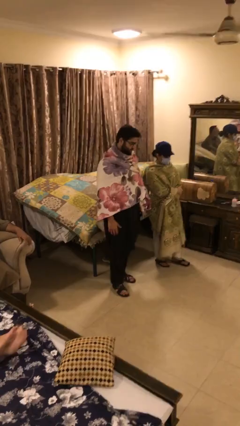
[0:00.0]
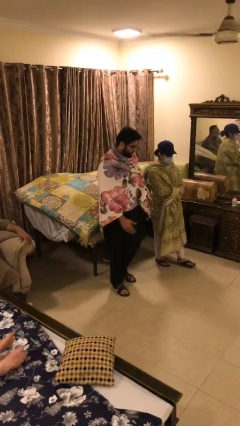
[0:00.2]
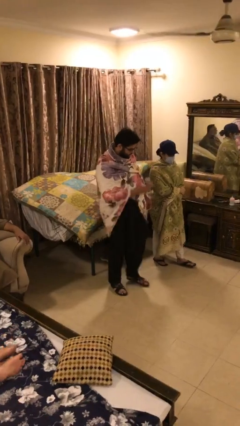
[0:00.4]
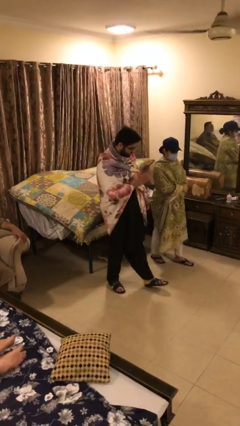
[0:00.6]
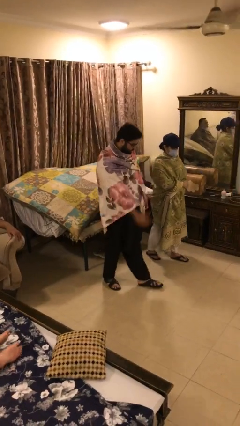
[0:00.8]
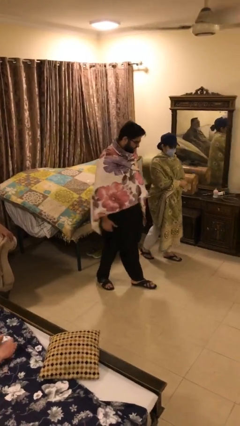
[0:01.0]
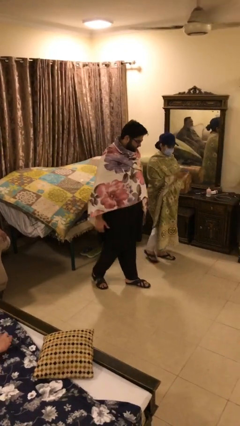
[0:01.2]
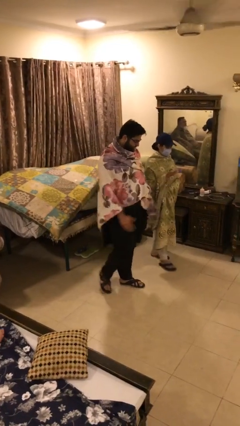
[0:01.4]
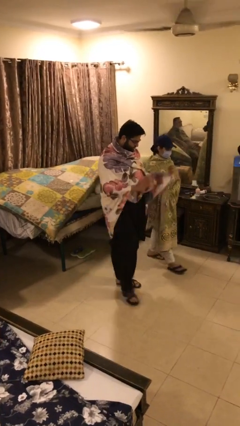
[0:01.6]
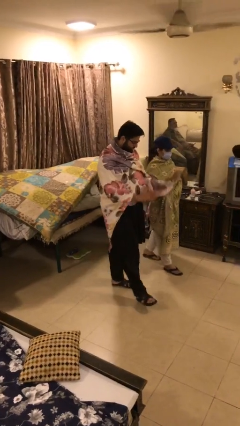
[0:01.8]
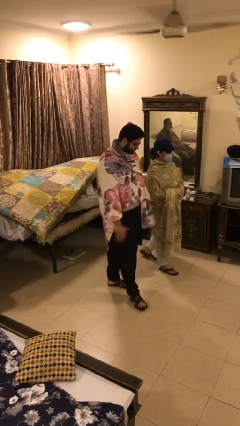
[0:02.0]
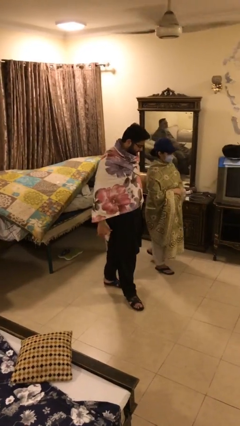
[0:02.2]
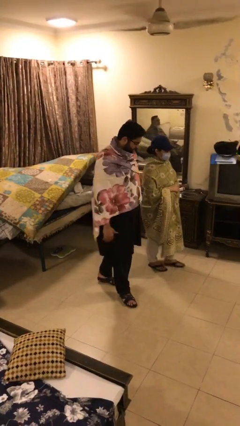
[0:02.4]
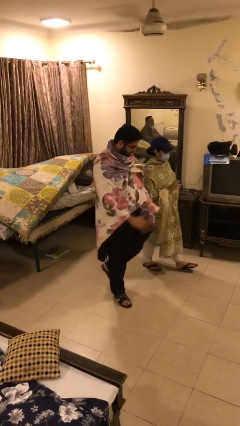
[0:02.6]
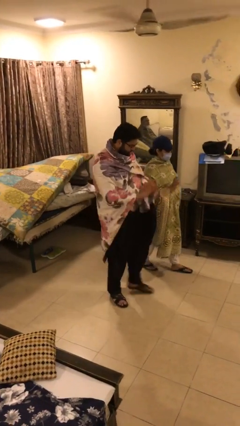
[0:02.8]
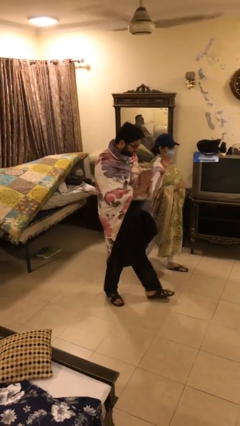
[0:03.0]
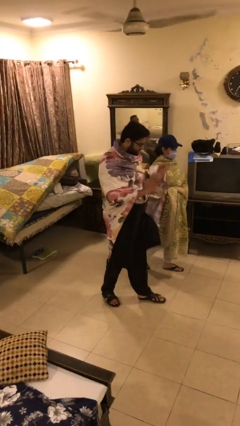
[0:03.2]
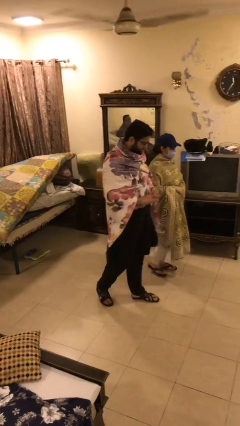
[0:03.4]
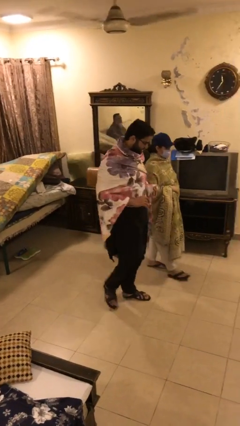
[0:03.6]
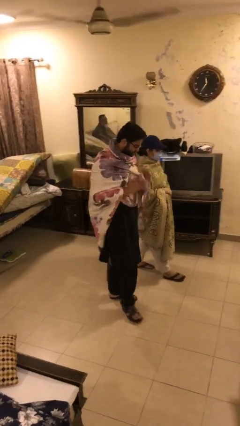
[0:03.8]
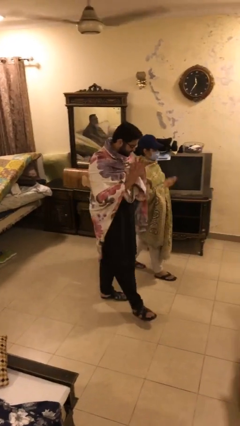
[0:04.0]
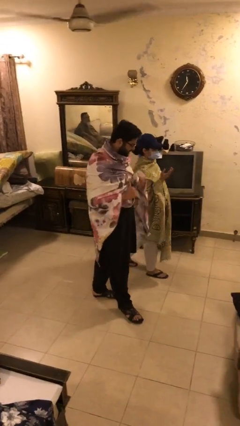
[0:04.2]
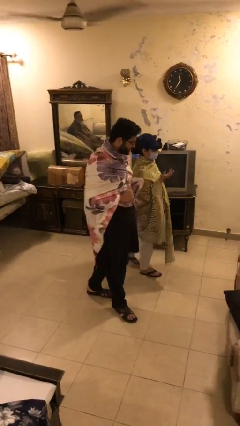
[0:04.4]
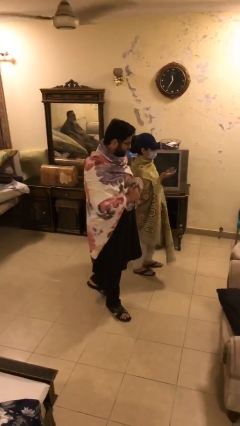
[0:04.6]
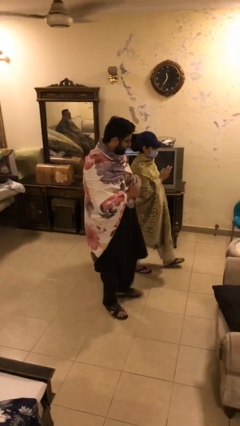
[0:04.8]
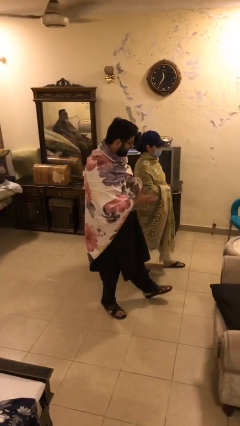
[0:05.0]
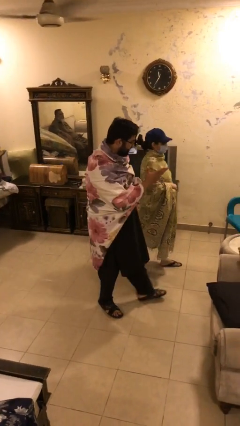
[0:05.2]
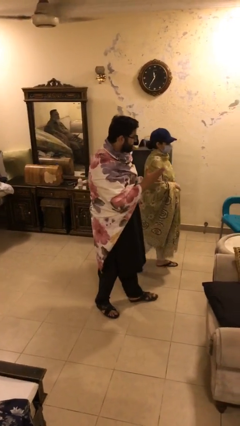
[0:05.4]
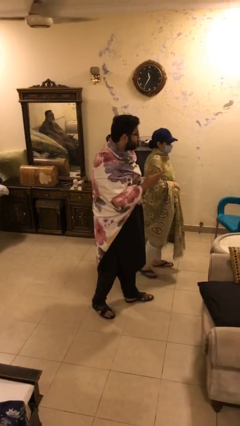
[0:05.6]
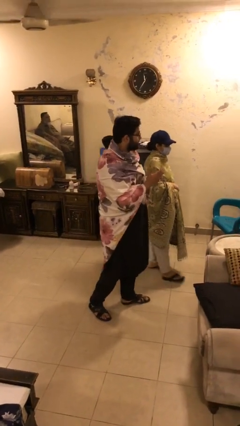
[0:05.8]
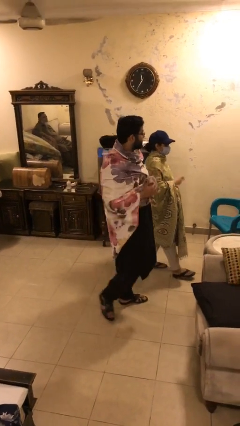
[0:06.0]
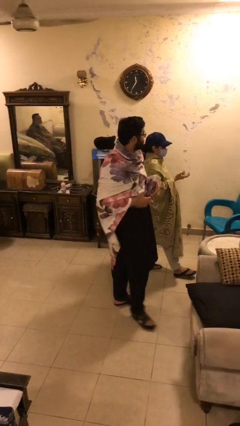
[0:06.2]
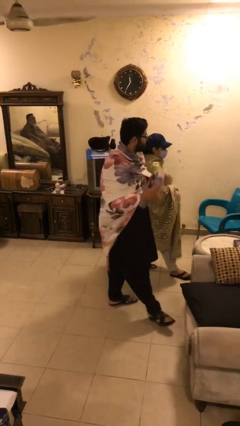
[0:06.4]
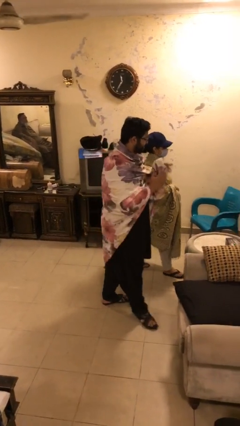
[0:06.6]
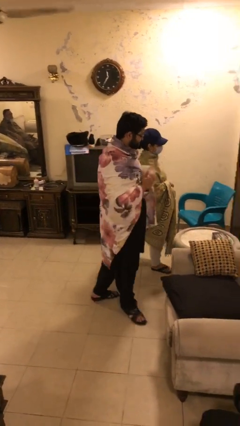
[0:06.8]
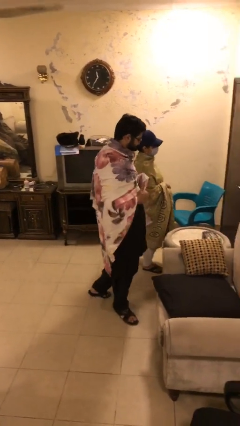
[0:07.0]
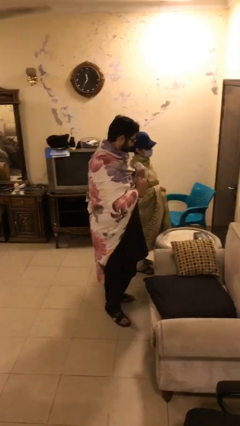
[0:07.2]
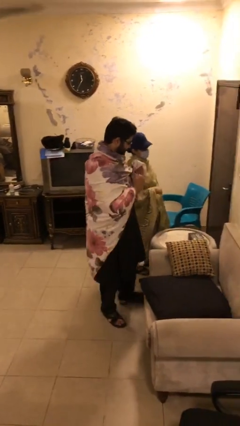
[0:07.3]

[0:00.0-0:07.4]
person talks to person

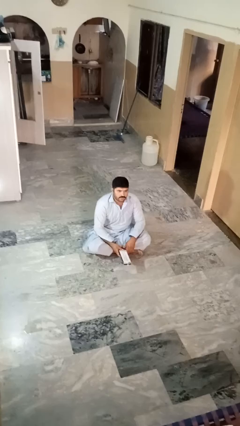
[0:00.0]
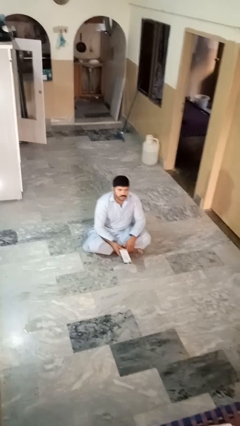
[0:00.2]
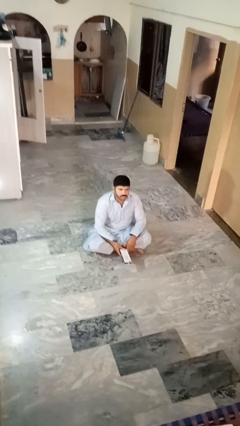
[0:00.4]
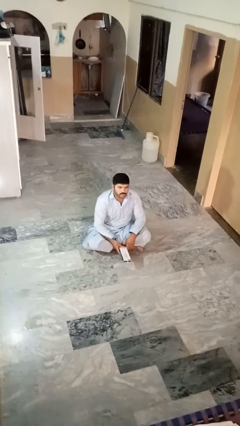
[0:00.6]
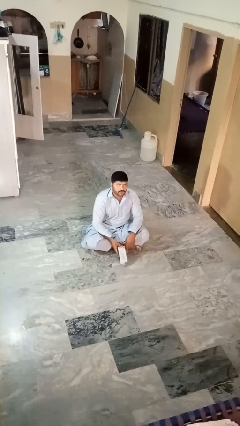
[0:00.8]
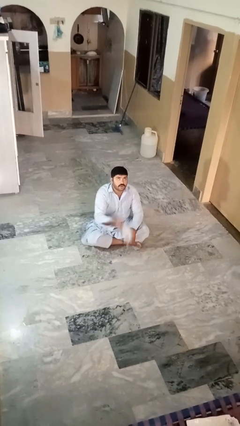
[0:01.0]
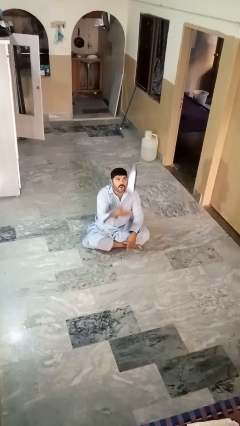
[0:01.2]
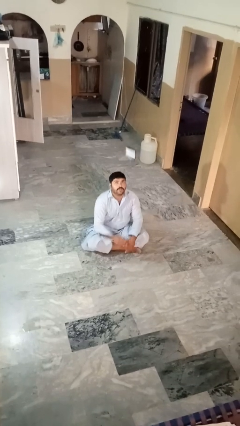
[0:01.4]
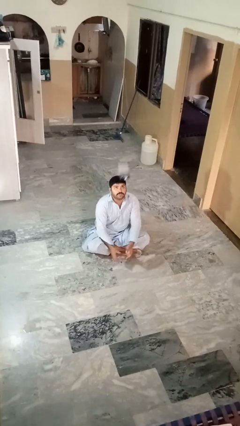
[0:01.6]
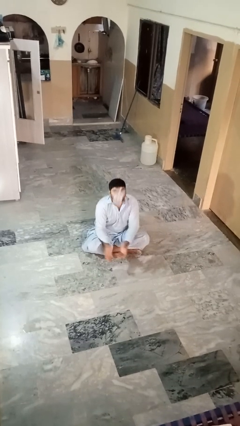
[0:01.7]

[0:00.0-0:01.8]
person drops object

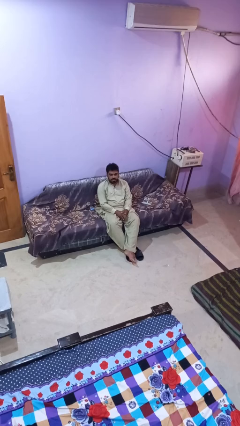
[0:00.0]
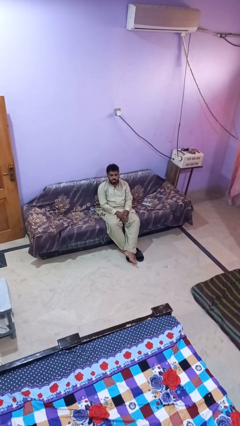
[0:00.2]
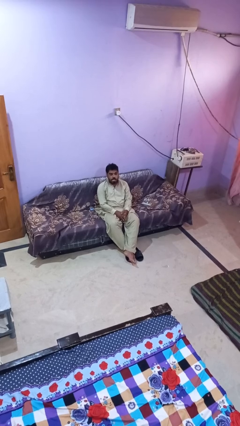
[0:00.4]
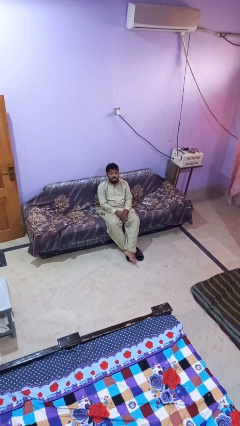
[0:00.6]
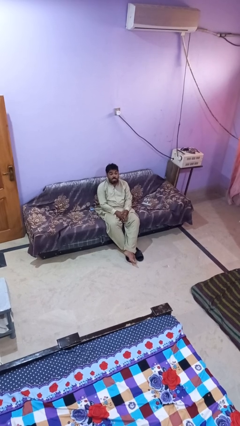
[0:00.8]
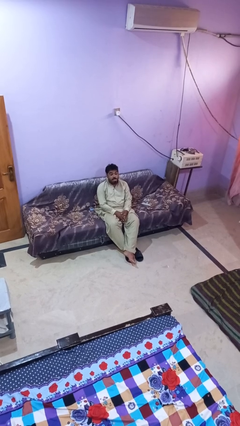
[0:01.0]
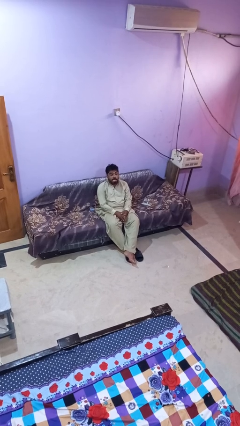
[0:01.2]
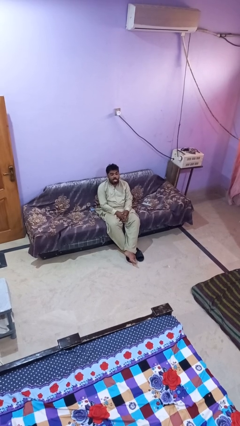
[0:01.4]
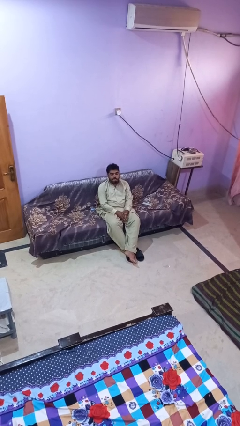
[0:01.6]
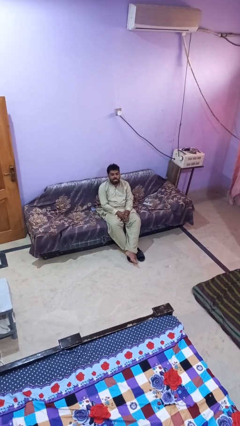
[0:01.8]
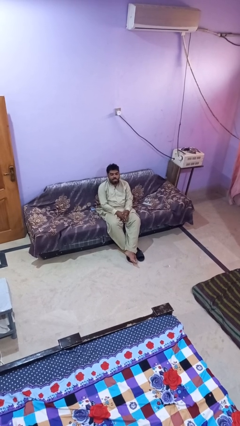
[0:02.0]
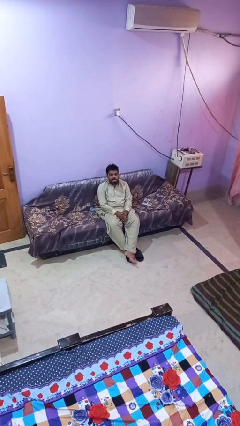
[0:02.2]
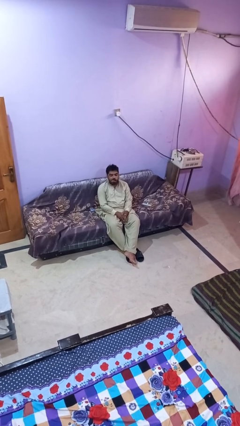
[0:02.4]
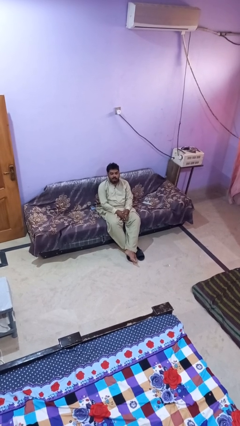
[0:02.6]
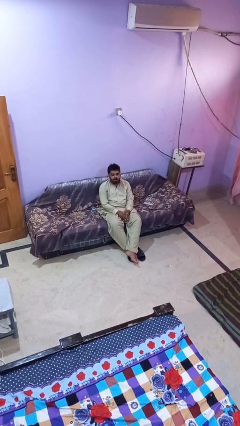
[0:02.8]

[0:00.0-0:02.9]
person sticks out tongue

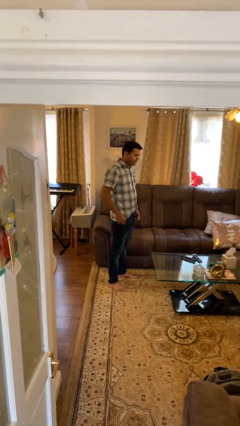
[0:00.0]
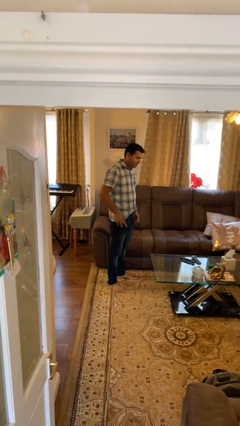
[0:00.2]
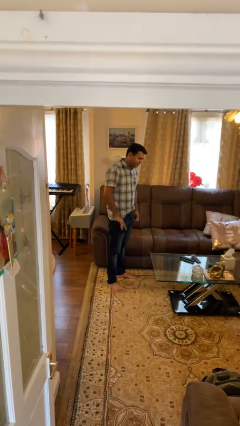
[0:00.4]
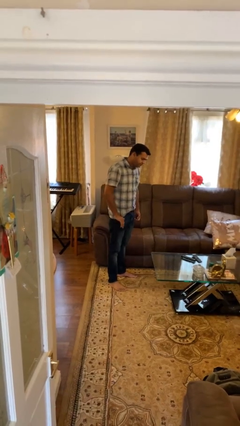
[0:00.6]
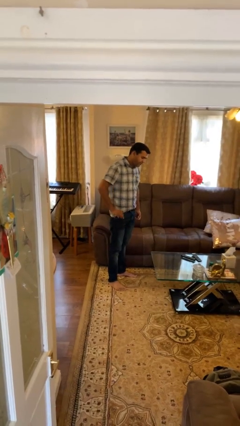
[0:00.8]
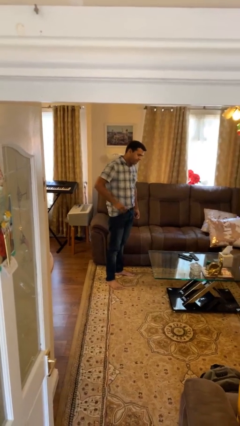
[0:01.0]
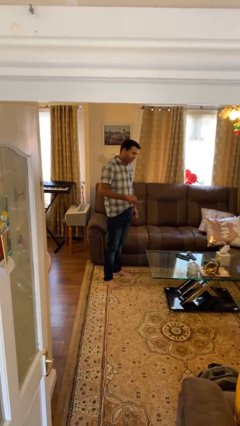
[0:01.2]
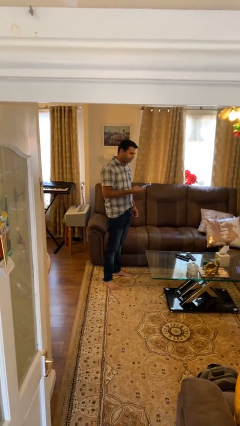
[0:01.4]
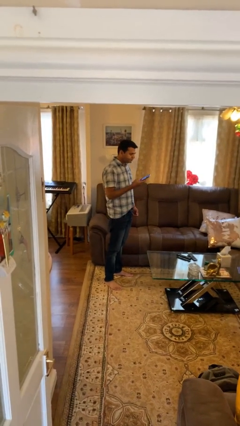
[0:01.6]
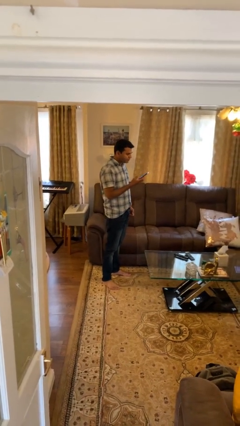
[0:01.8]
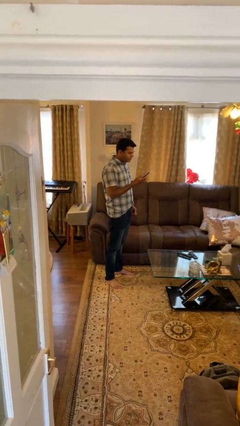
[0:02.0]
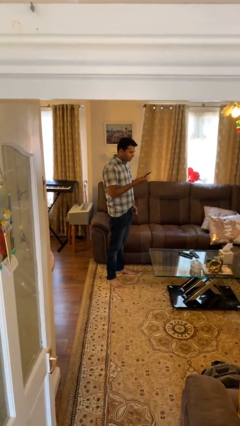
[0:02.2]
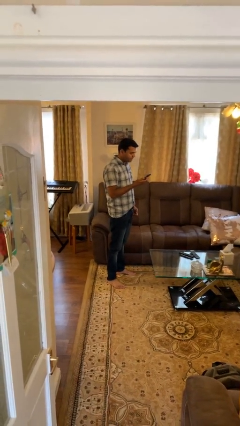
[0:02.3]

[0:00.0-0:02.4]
person takes phone from pocket

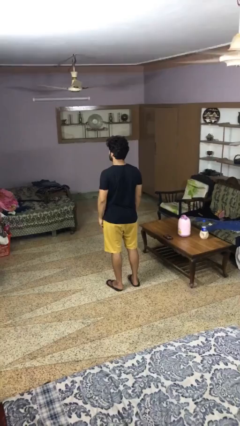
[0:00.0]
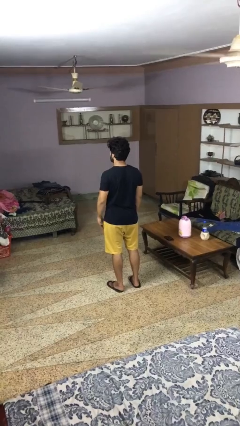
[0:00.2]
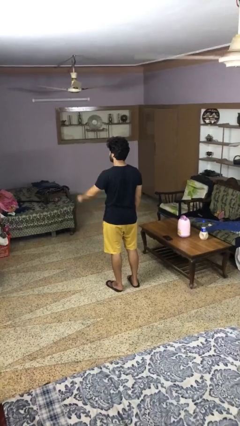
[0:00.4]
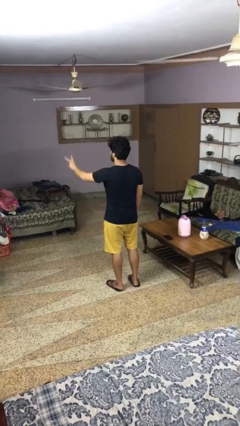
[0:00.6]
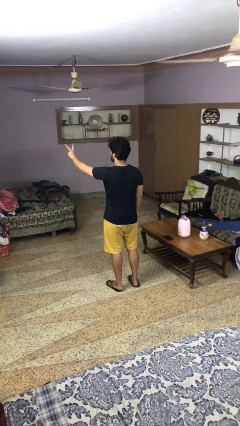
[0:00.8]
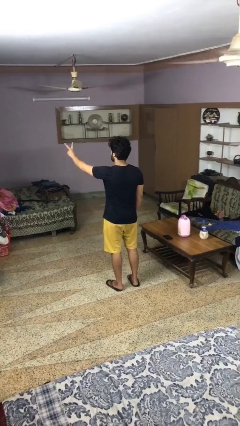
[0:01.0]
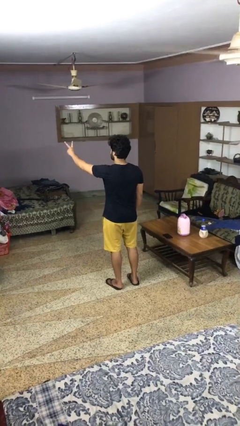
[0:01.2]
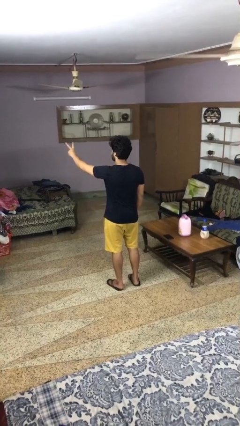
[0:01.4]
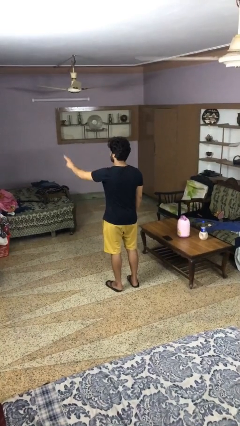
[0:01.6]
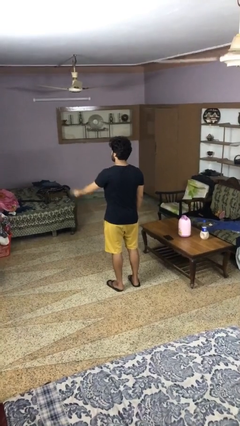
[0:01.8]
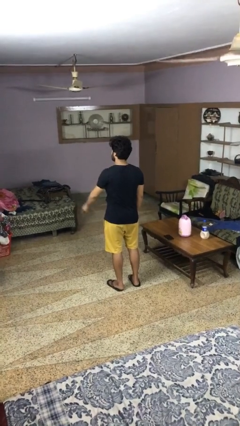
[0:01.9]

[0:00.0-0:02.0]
person gestures peace

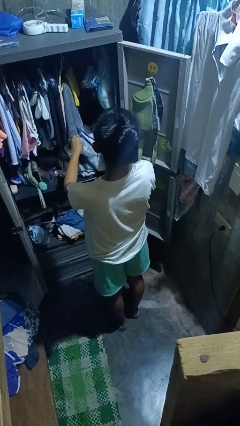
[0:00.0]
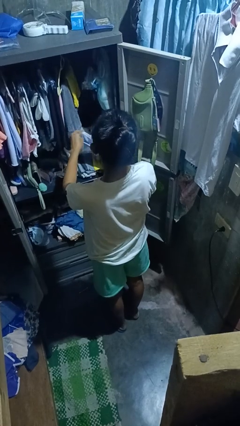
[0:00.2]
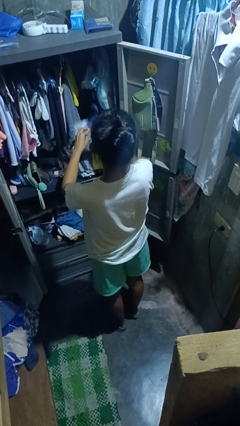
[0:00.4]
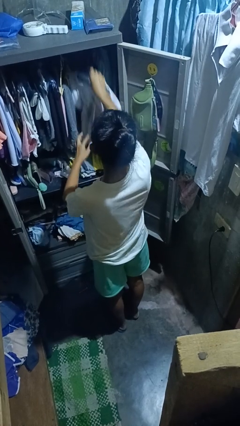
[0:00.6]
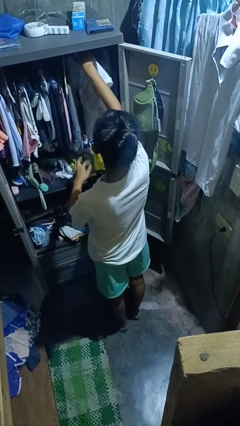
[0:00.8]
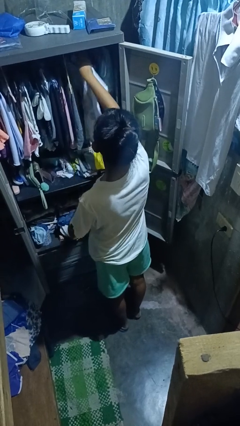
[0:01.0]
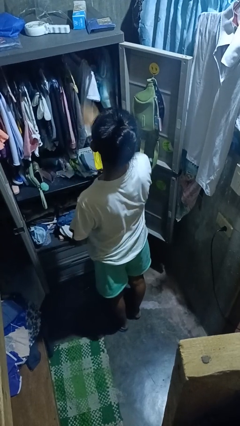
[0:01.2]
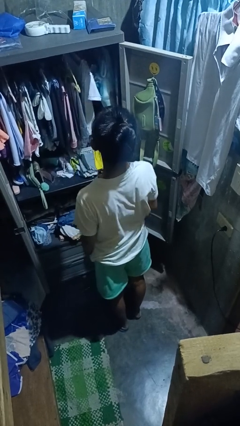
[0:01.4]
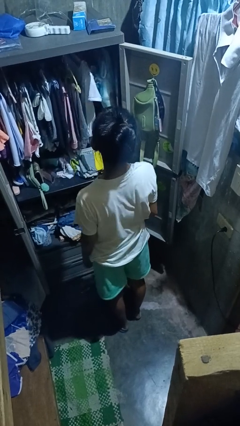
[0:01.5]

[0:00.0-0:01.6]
person puts clothes into closet
